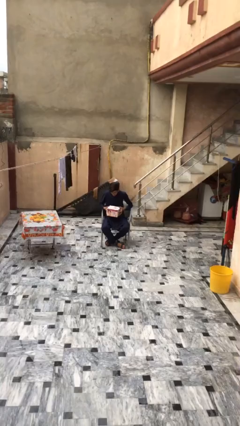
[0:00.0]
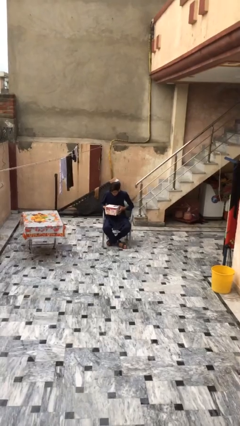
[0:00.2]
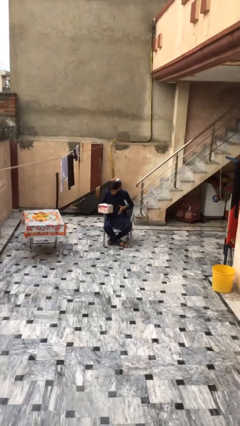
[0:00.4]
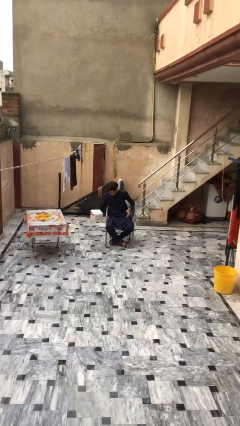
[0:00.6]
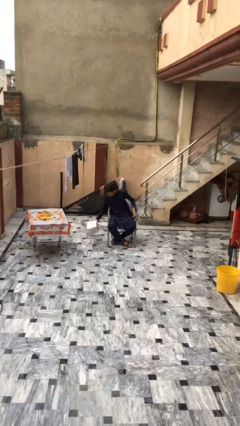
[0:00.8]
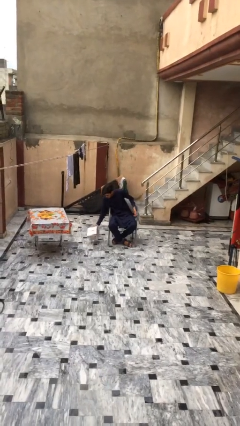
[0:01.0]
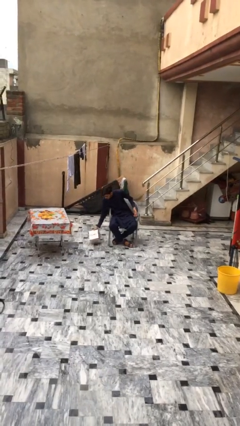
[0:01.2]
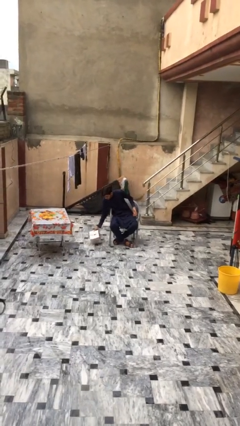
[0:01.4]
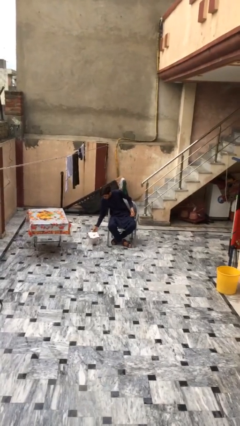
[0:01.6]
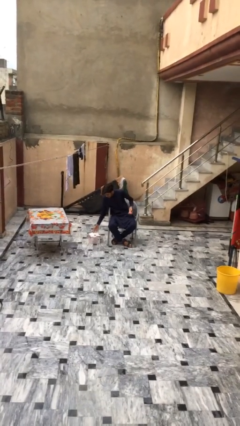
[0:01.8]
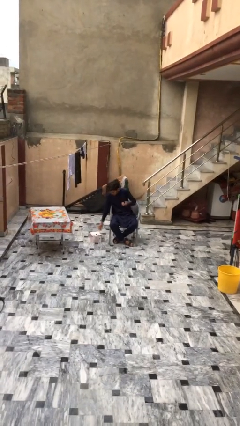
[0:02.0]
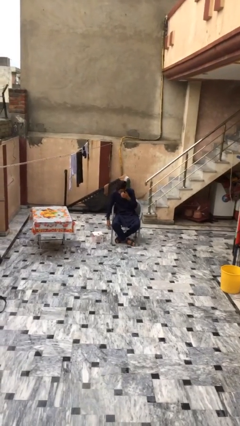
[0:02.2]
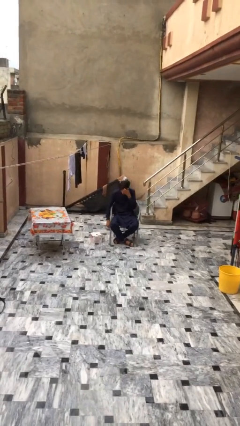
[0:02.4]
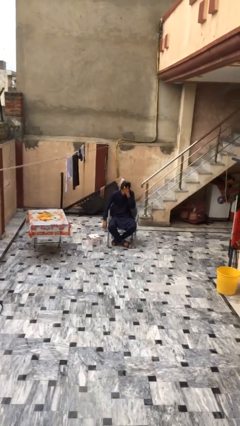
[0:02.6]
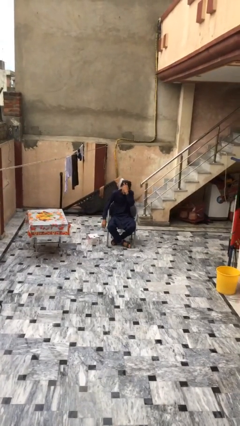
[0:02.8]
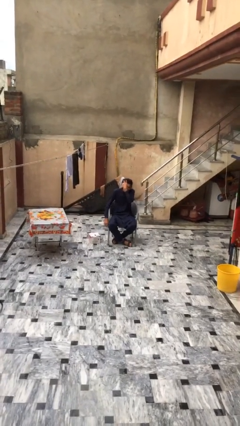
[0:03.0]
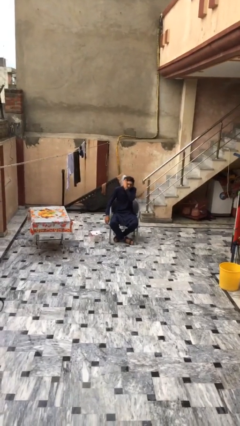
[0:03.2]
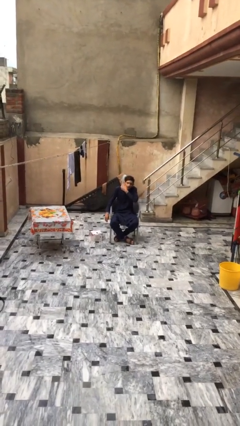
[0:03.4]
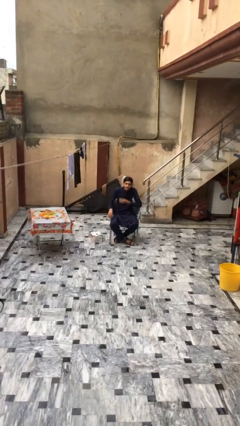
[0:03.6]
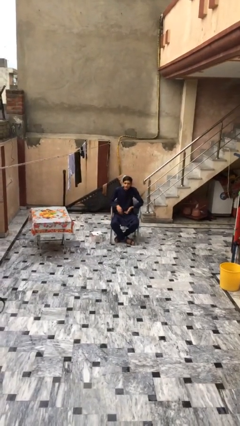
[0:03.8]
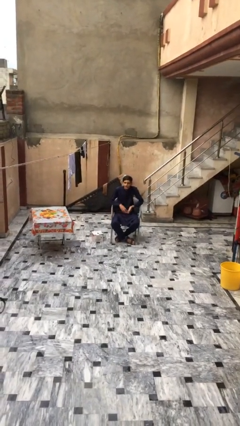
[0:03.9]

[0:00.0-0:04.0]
person puts down object on floor

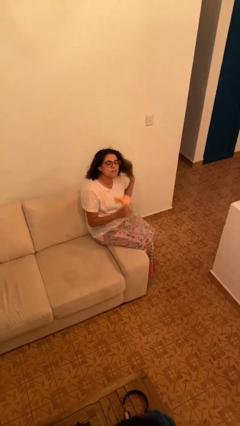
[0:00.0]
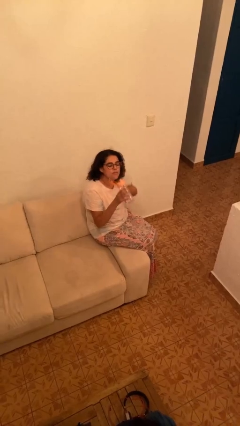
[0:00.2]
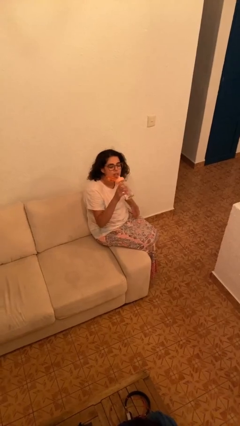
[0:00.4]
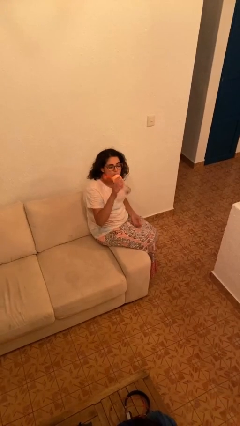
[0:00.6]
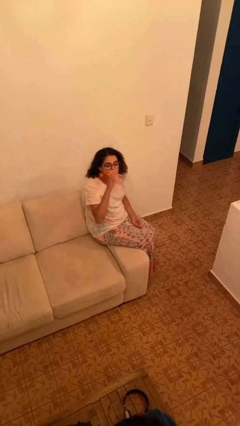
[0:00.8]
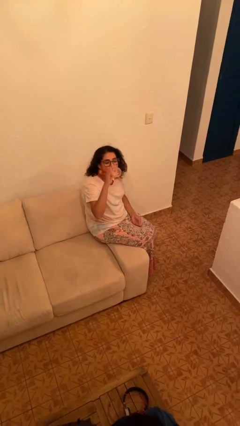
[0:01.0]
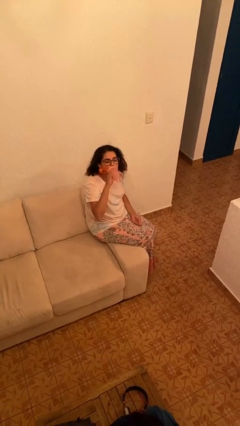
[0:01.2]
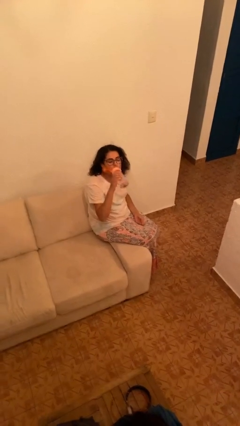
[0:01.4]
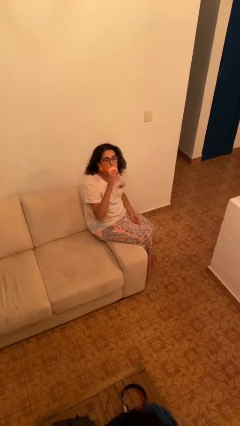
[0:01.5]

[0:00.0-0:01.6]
person drinks from bottle

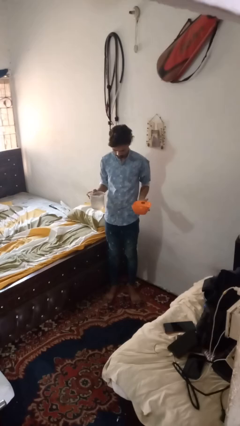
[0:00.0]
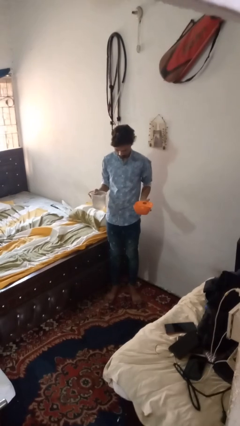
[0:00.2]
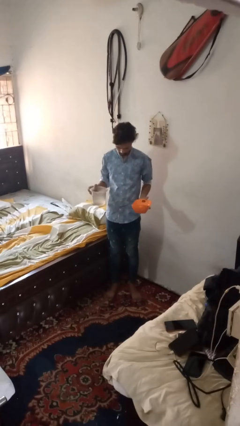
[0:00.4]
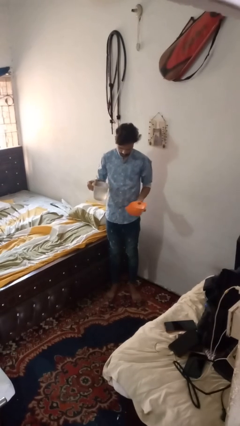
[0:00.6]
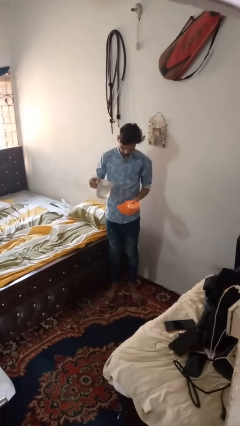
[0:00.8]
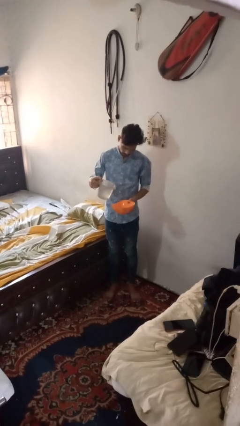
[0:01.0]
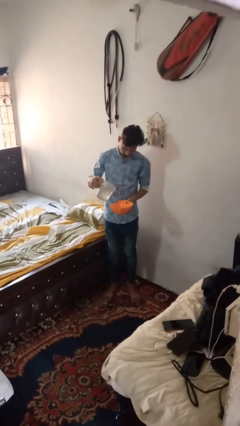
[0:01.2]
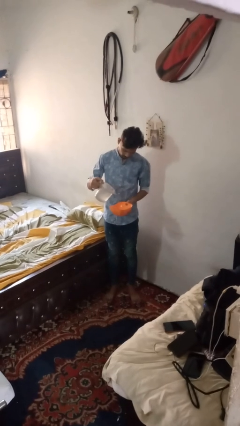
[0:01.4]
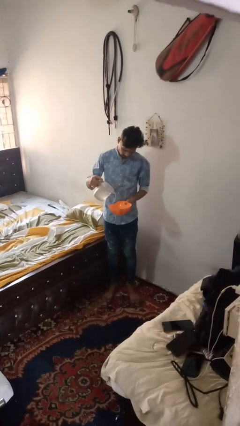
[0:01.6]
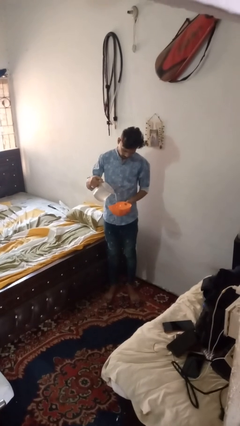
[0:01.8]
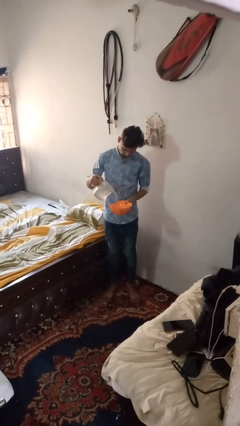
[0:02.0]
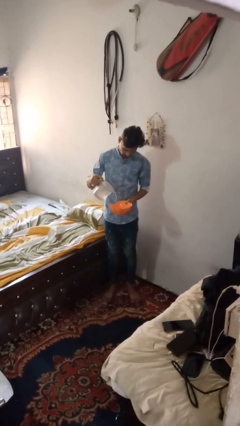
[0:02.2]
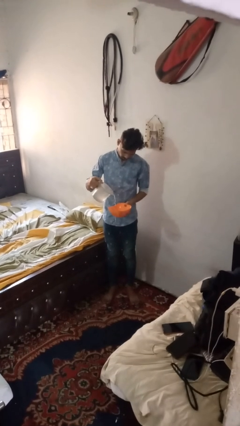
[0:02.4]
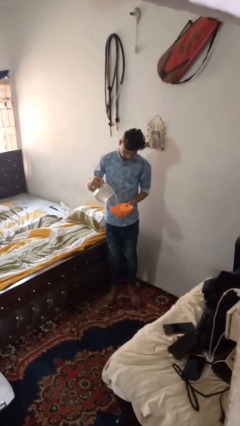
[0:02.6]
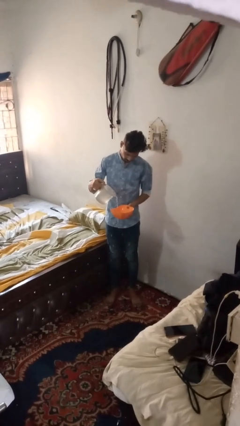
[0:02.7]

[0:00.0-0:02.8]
person pours into bowl

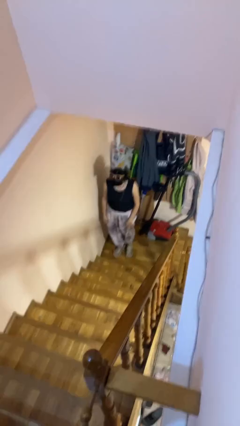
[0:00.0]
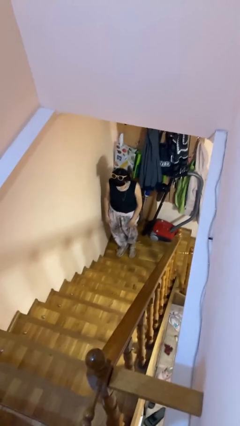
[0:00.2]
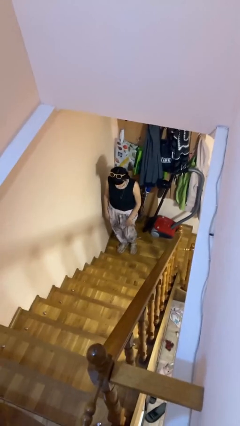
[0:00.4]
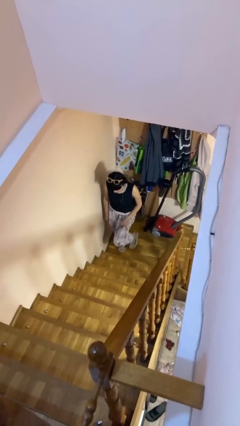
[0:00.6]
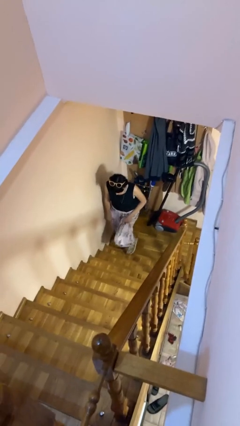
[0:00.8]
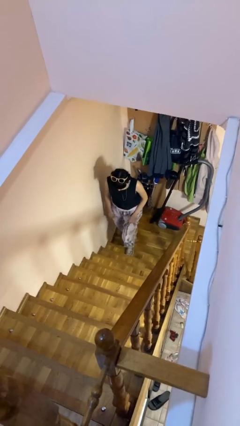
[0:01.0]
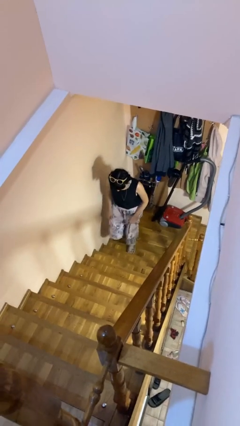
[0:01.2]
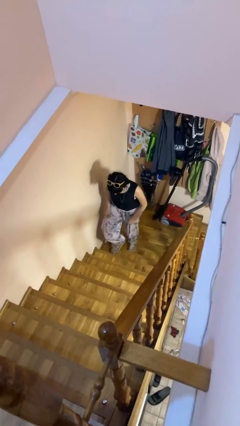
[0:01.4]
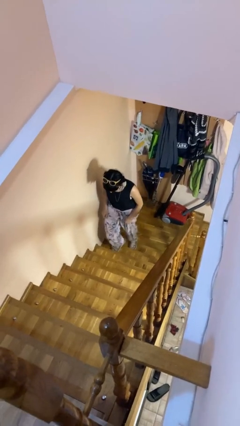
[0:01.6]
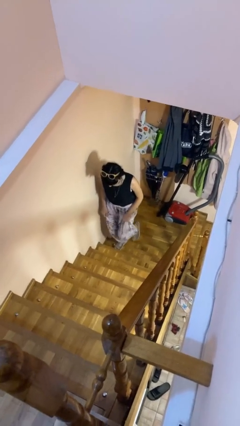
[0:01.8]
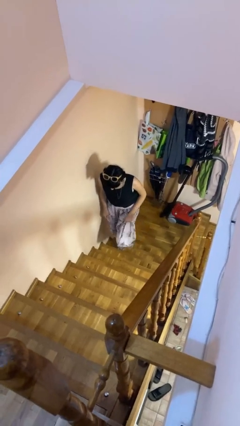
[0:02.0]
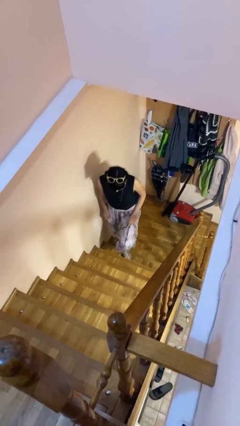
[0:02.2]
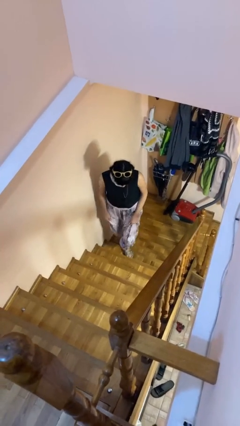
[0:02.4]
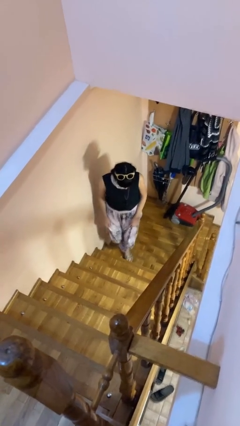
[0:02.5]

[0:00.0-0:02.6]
person climbs up stairs

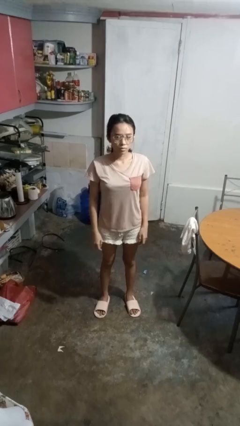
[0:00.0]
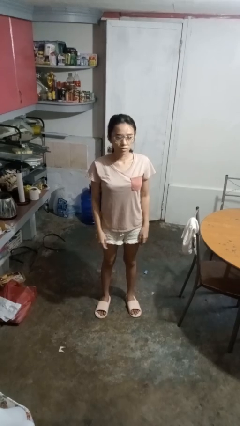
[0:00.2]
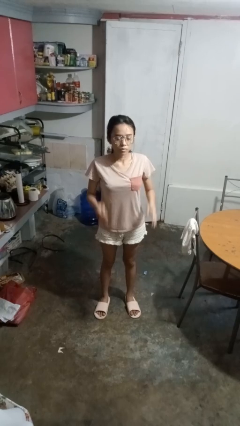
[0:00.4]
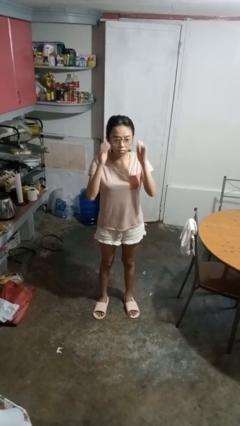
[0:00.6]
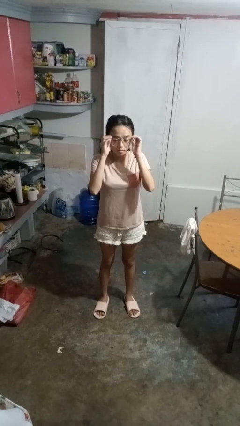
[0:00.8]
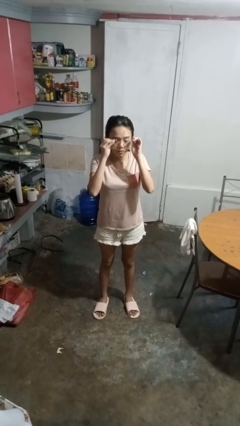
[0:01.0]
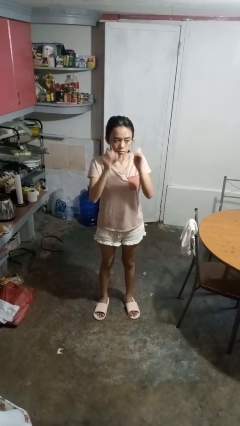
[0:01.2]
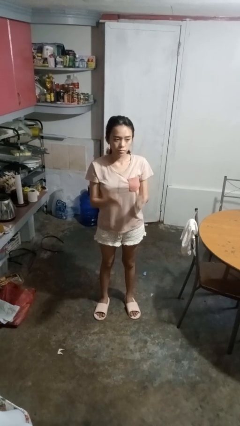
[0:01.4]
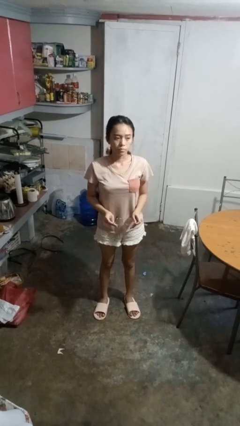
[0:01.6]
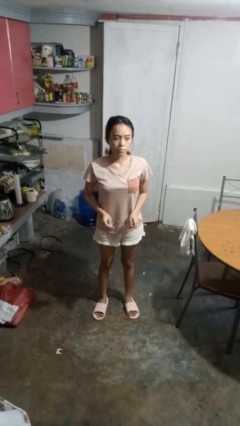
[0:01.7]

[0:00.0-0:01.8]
person takes off glasses

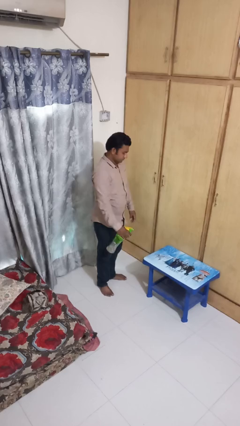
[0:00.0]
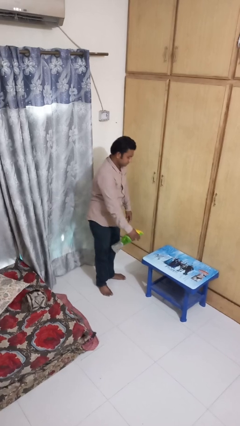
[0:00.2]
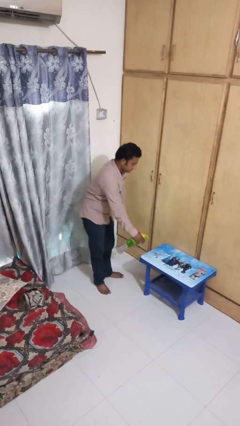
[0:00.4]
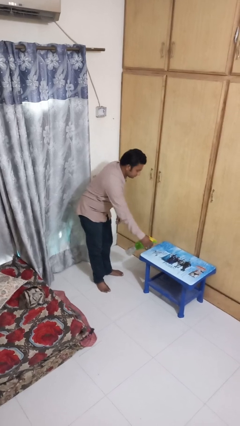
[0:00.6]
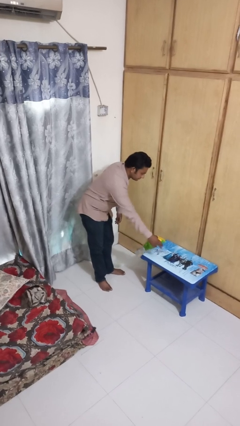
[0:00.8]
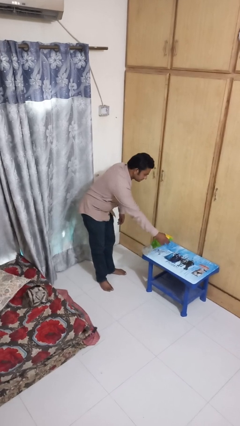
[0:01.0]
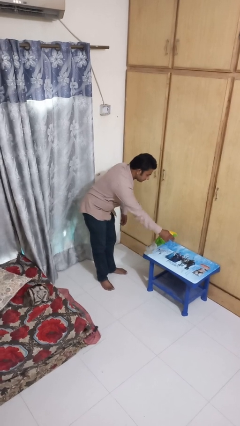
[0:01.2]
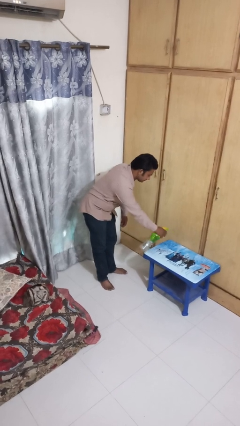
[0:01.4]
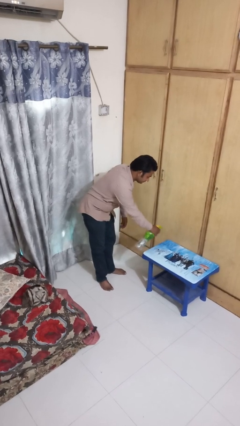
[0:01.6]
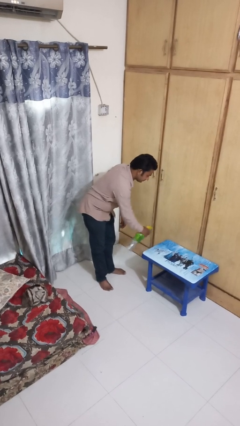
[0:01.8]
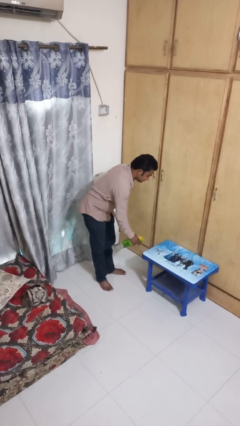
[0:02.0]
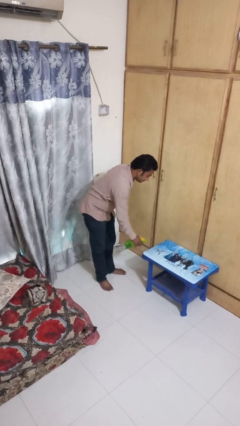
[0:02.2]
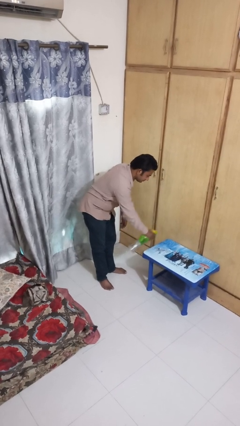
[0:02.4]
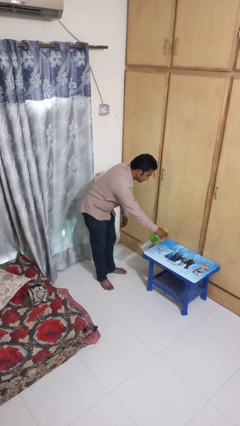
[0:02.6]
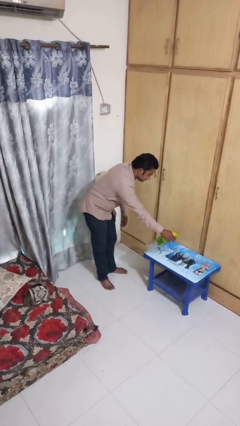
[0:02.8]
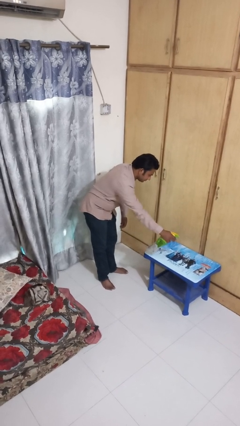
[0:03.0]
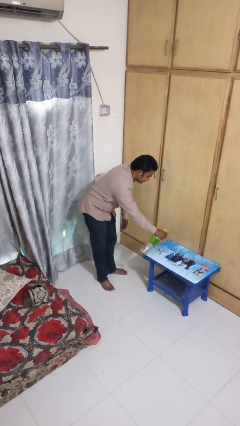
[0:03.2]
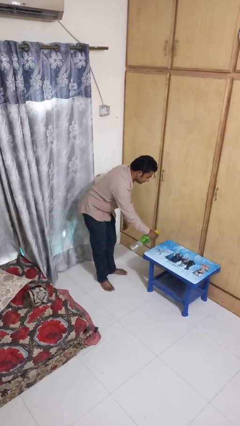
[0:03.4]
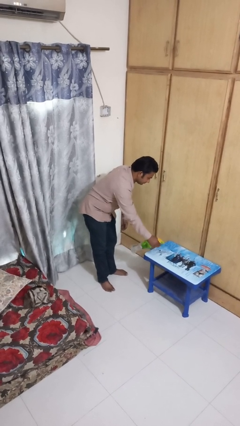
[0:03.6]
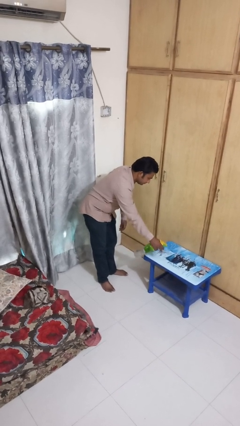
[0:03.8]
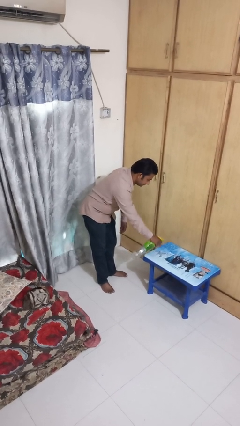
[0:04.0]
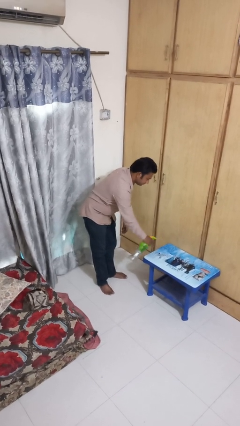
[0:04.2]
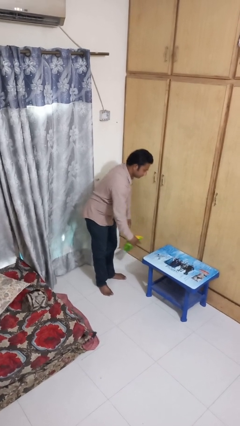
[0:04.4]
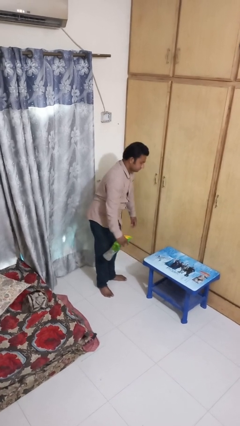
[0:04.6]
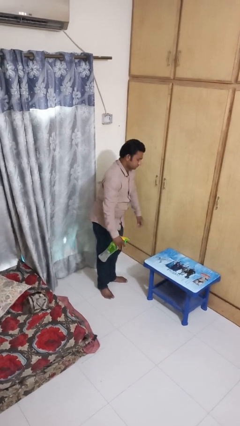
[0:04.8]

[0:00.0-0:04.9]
person sprays from bottle
